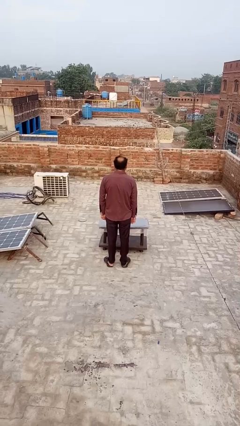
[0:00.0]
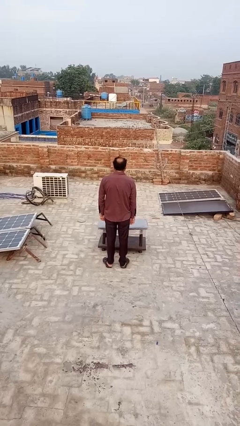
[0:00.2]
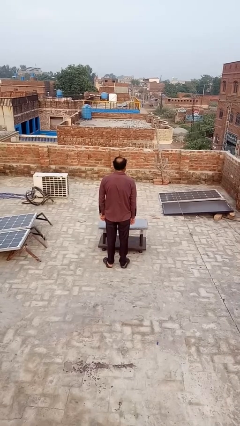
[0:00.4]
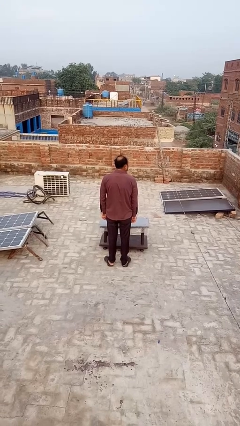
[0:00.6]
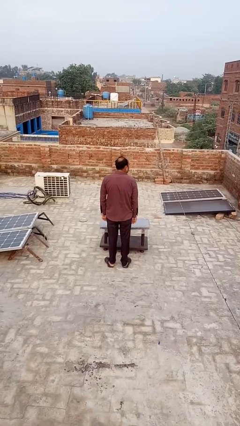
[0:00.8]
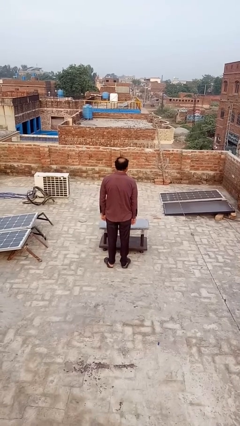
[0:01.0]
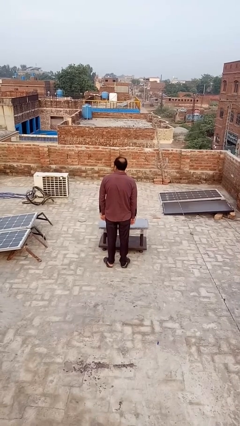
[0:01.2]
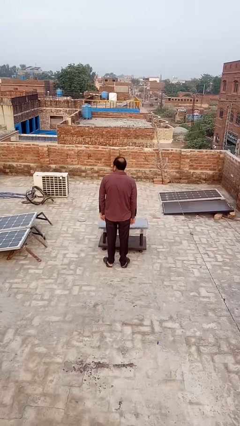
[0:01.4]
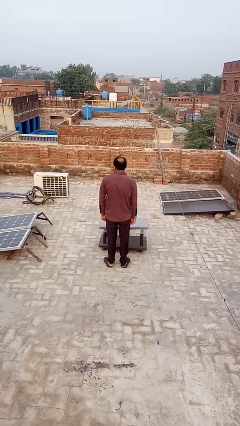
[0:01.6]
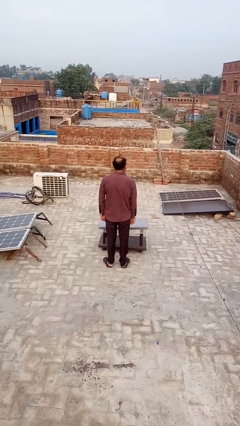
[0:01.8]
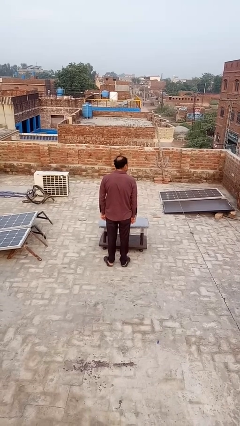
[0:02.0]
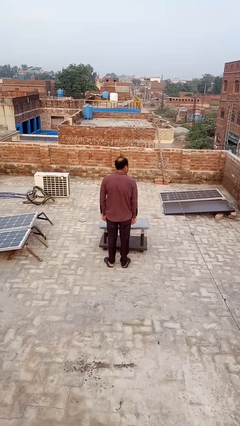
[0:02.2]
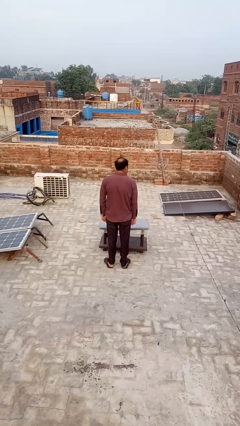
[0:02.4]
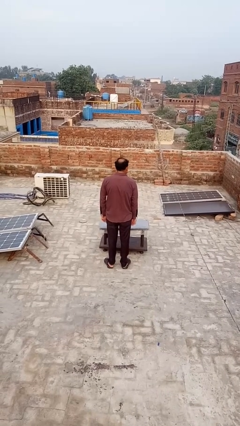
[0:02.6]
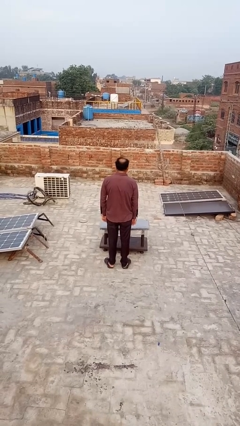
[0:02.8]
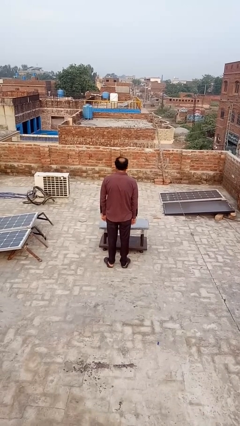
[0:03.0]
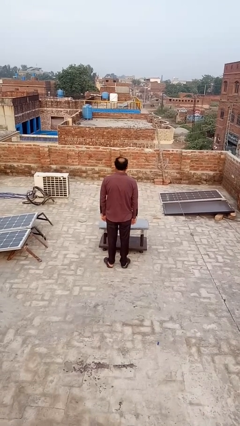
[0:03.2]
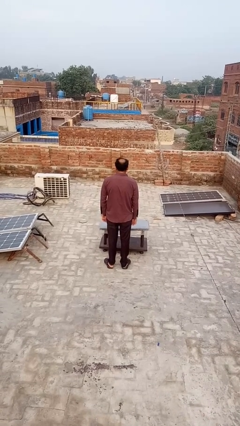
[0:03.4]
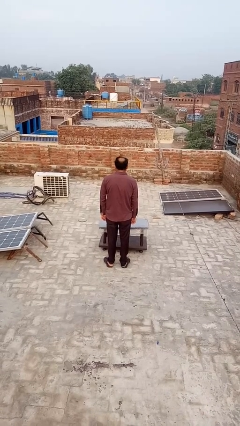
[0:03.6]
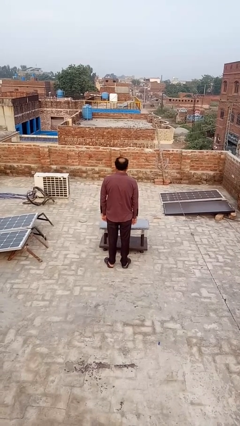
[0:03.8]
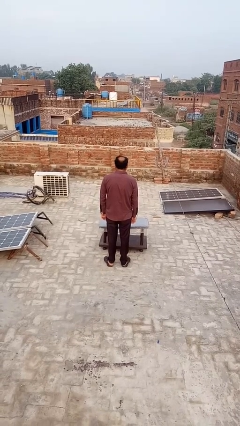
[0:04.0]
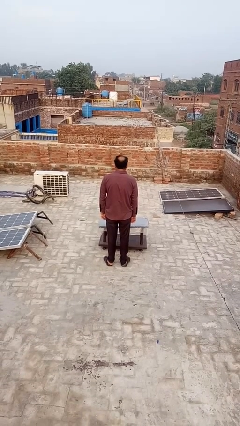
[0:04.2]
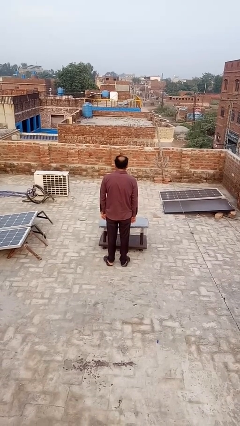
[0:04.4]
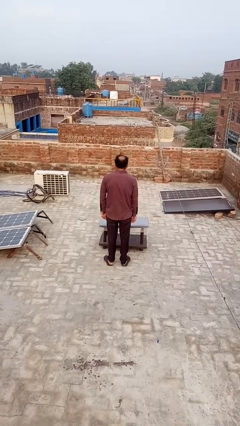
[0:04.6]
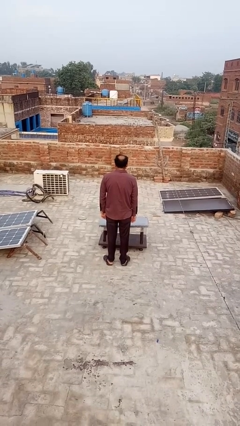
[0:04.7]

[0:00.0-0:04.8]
person shakes head

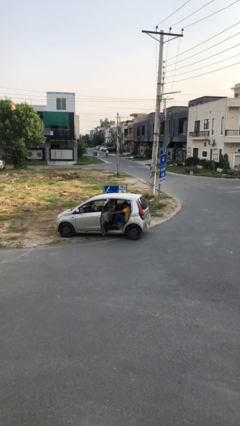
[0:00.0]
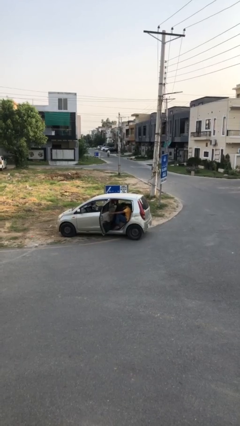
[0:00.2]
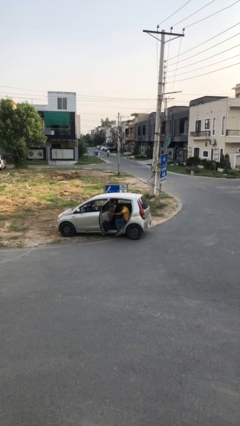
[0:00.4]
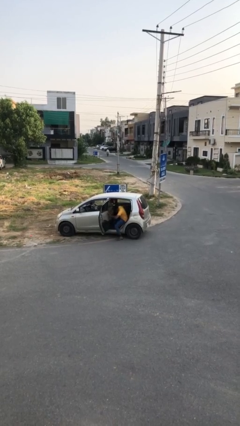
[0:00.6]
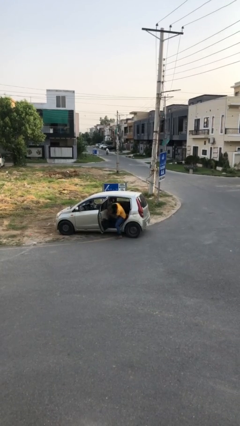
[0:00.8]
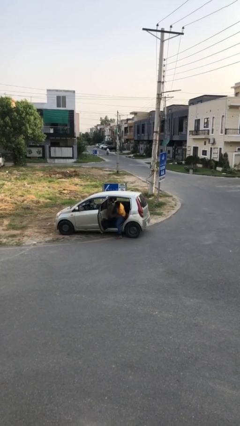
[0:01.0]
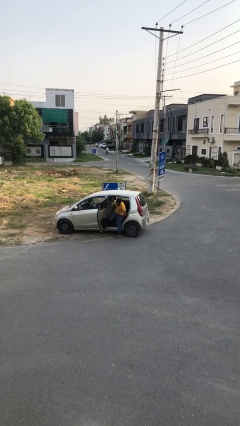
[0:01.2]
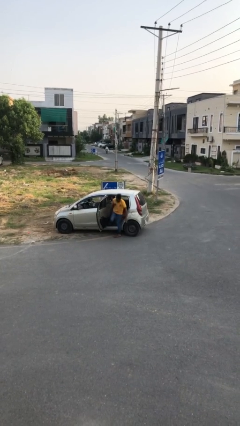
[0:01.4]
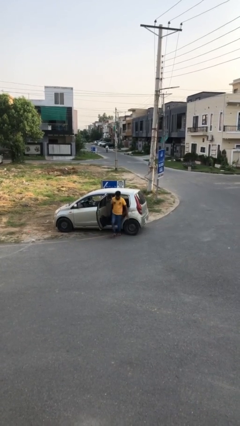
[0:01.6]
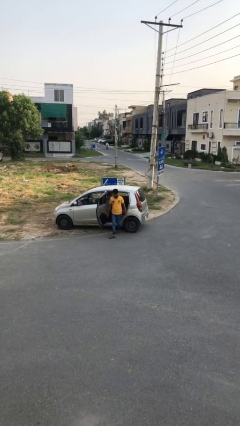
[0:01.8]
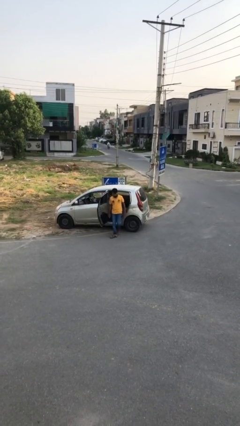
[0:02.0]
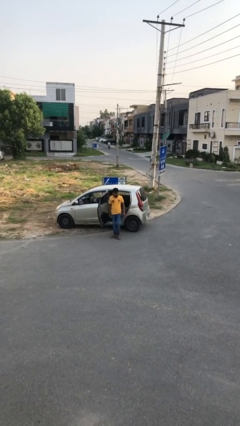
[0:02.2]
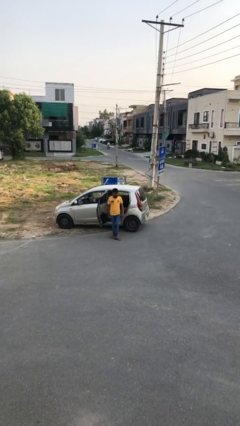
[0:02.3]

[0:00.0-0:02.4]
person exits car

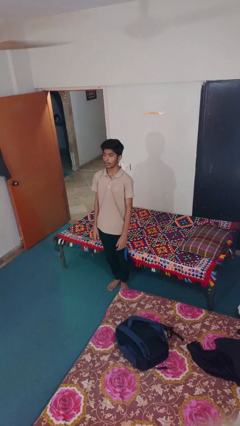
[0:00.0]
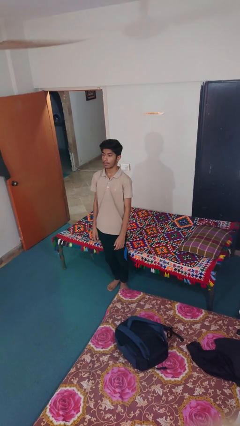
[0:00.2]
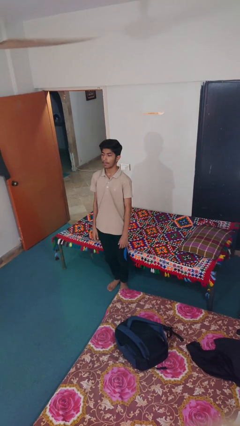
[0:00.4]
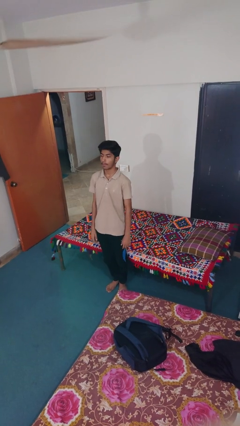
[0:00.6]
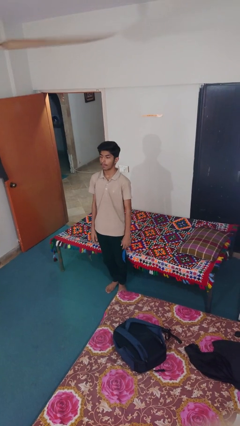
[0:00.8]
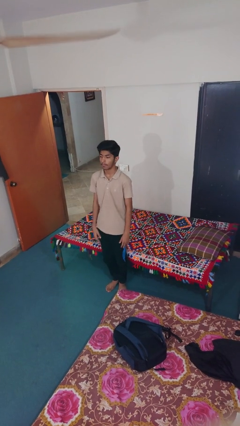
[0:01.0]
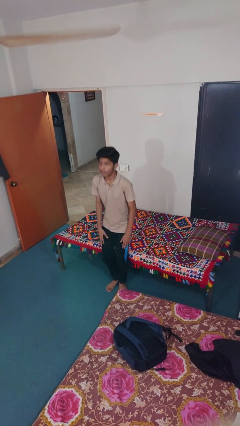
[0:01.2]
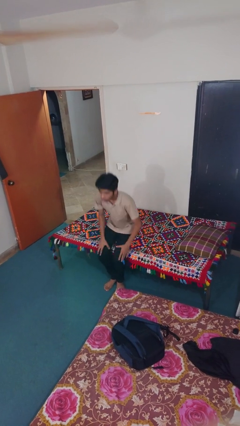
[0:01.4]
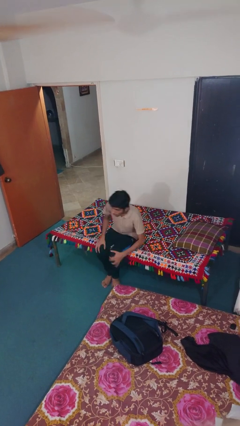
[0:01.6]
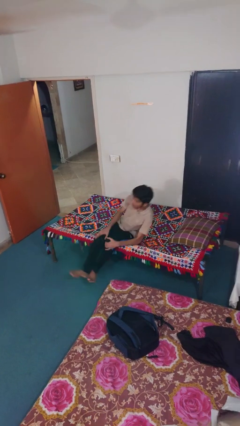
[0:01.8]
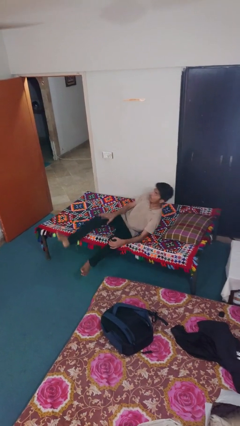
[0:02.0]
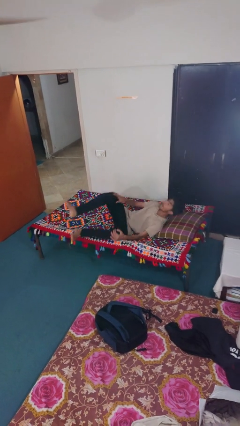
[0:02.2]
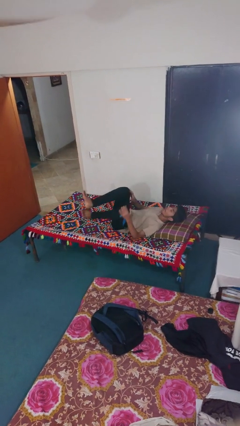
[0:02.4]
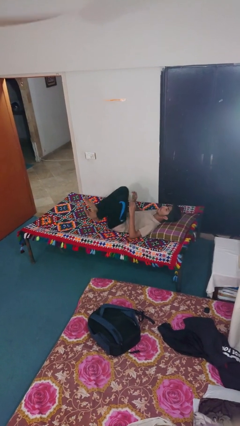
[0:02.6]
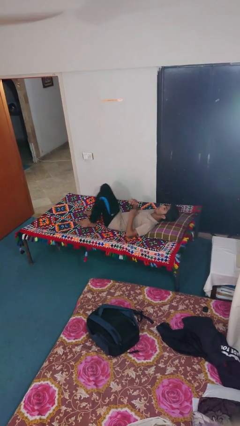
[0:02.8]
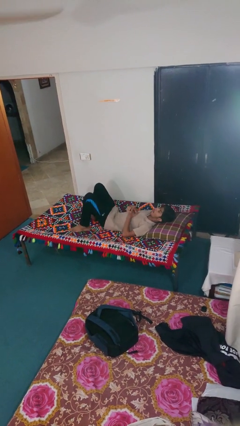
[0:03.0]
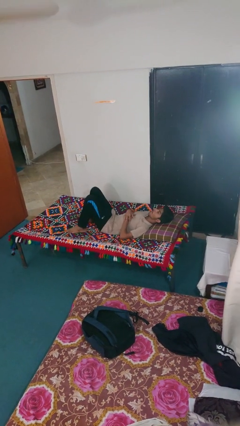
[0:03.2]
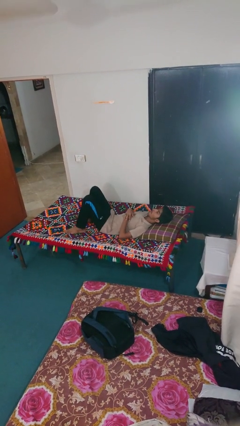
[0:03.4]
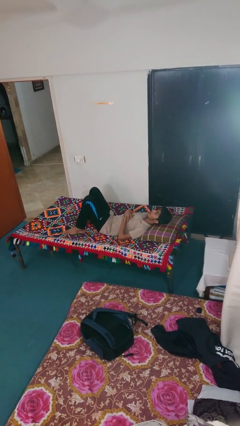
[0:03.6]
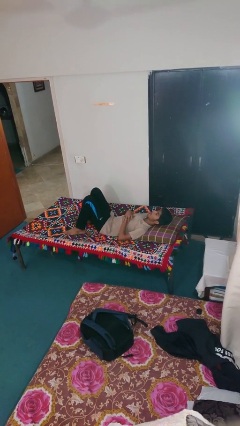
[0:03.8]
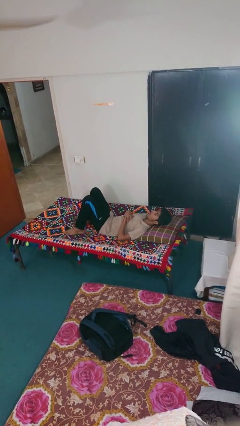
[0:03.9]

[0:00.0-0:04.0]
person lies down on bed

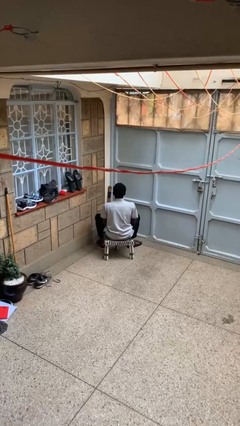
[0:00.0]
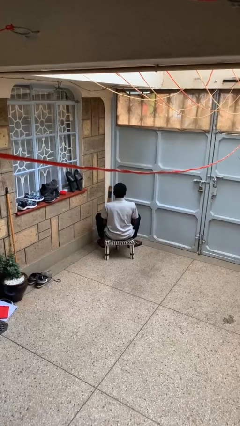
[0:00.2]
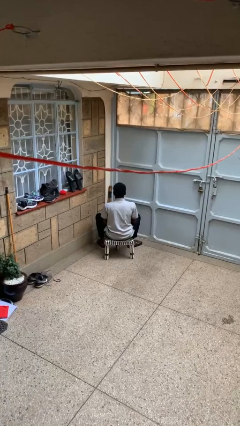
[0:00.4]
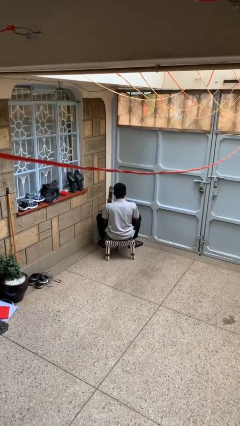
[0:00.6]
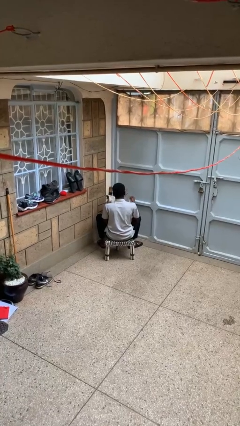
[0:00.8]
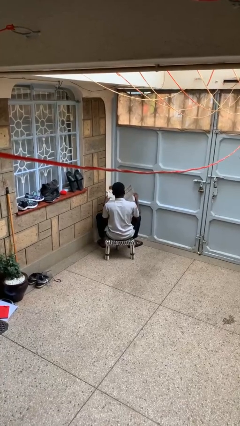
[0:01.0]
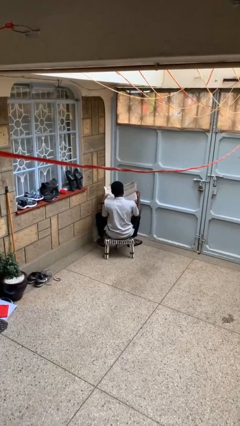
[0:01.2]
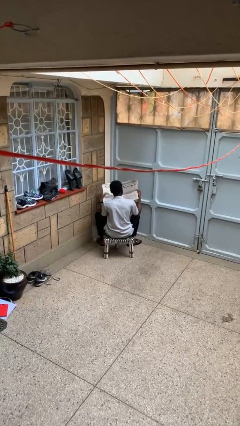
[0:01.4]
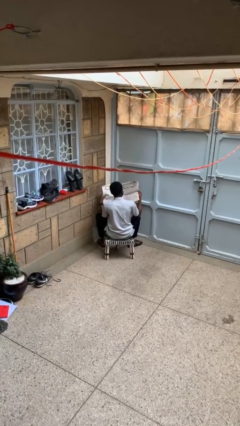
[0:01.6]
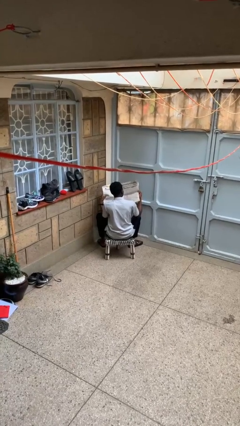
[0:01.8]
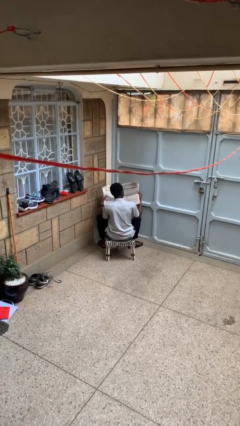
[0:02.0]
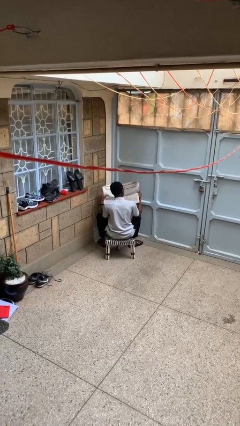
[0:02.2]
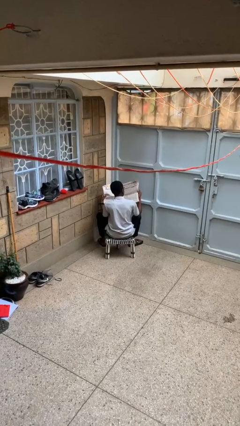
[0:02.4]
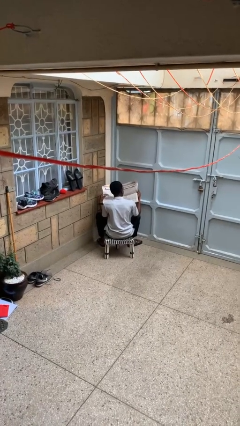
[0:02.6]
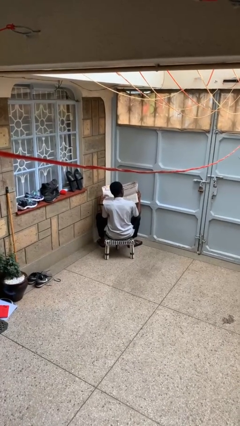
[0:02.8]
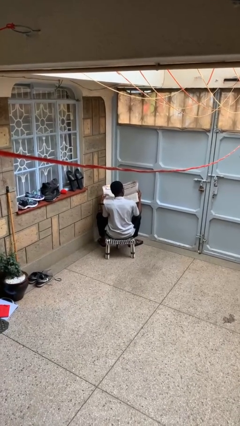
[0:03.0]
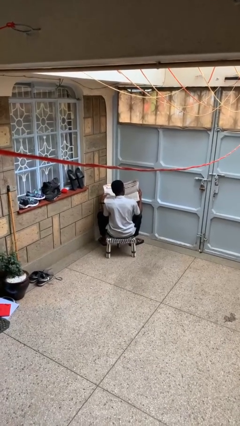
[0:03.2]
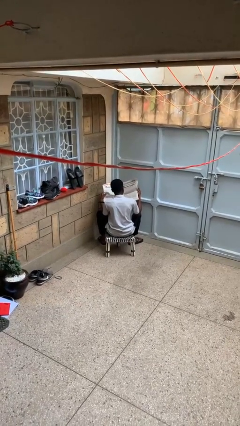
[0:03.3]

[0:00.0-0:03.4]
person reads newspaper

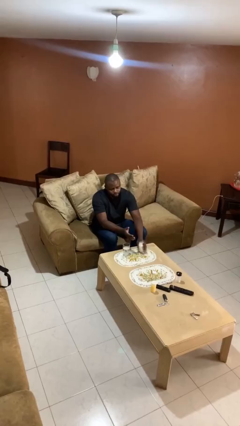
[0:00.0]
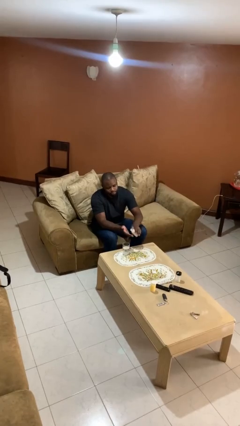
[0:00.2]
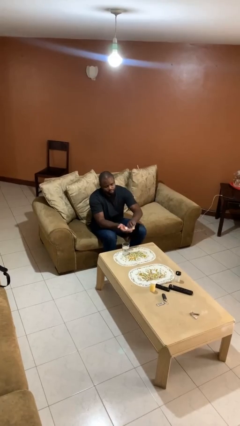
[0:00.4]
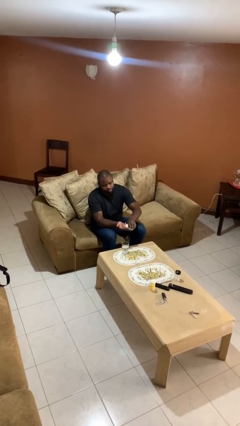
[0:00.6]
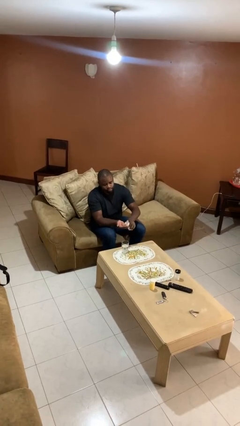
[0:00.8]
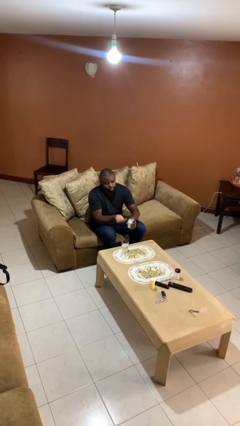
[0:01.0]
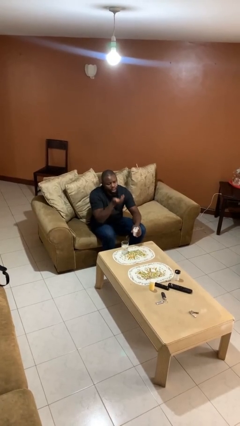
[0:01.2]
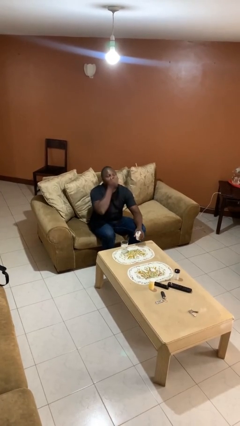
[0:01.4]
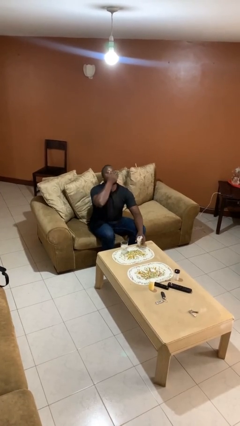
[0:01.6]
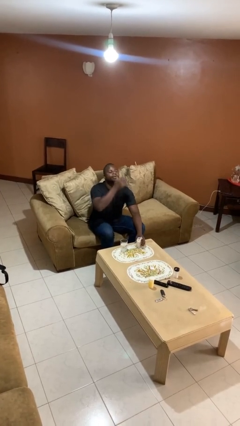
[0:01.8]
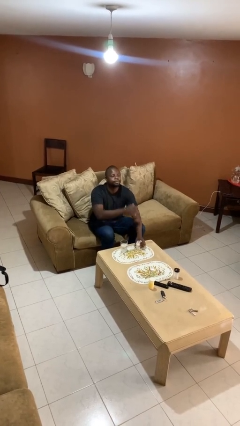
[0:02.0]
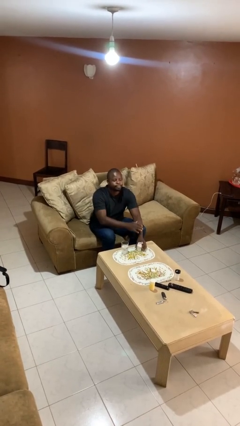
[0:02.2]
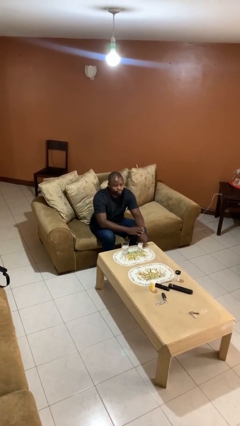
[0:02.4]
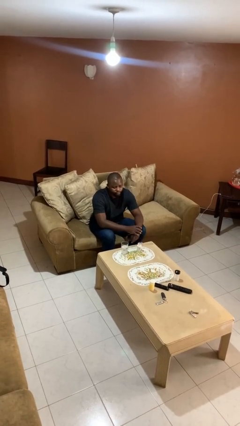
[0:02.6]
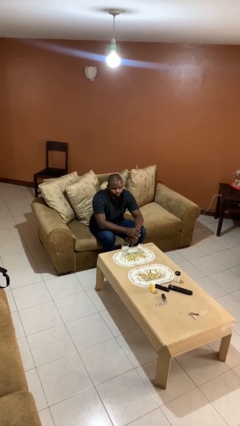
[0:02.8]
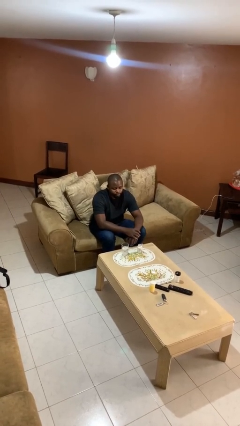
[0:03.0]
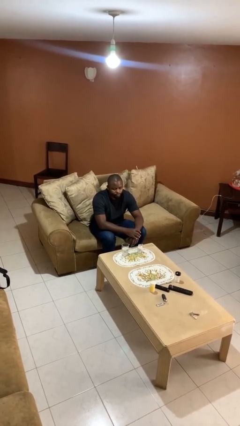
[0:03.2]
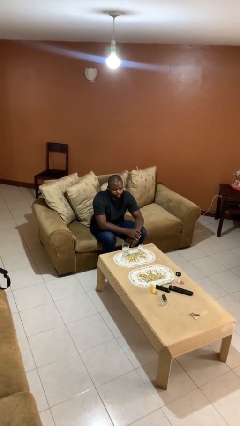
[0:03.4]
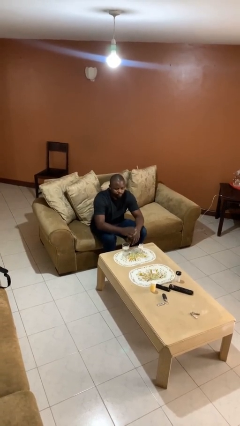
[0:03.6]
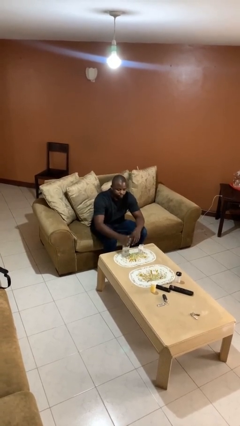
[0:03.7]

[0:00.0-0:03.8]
person takes medicine pills
